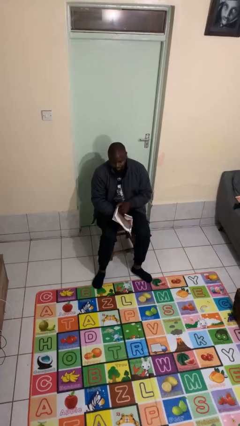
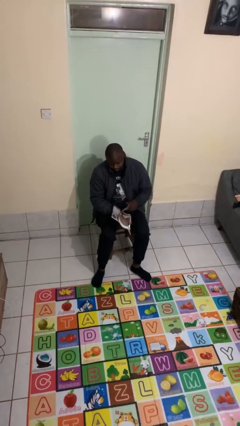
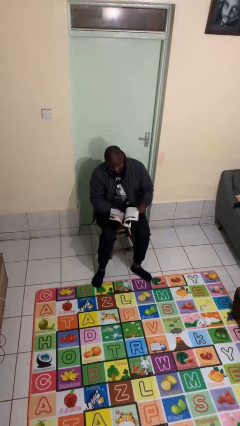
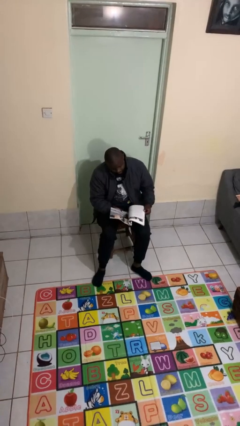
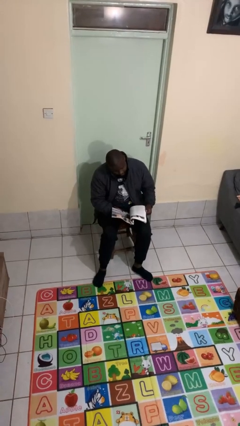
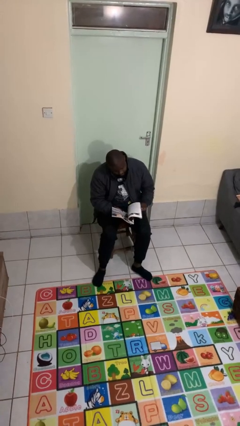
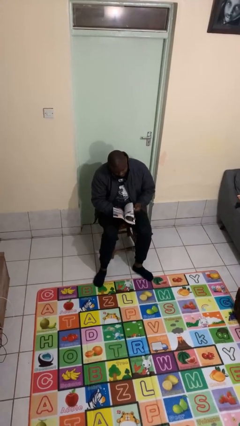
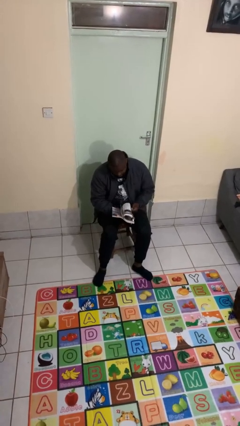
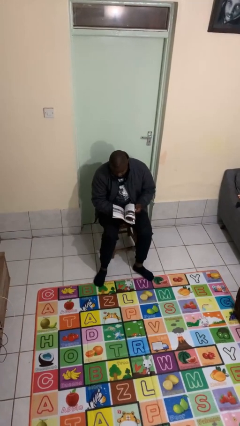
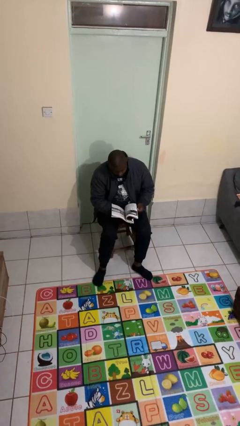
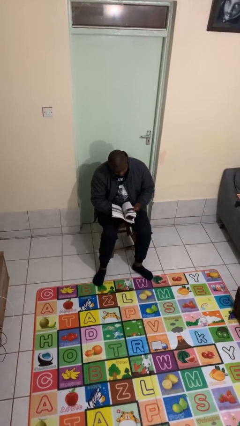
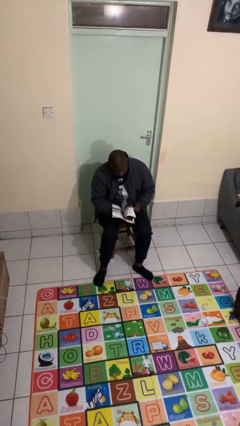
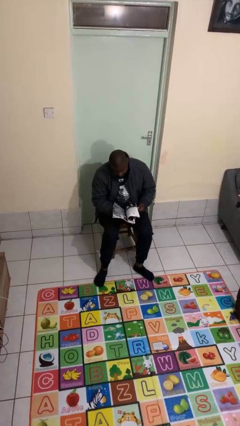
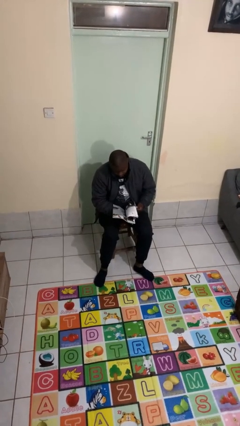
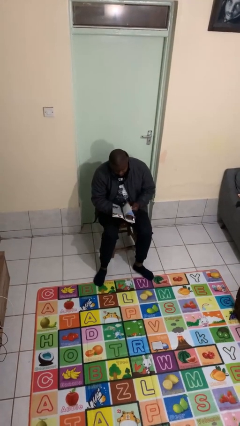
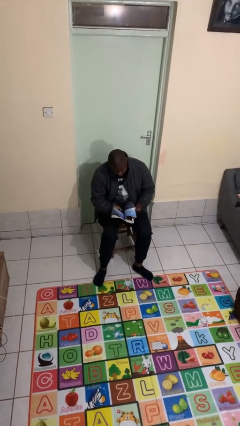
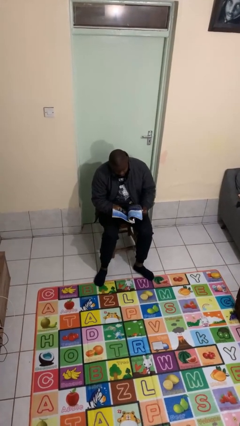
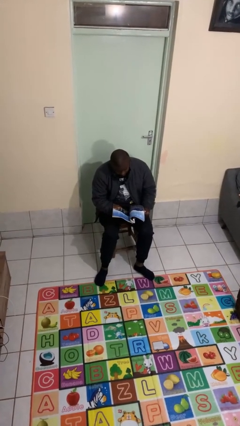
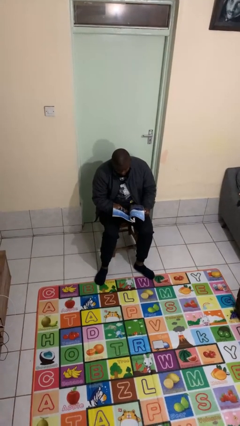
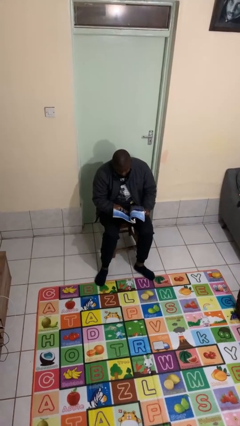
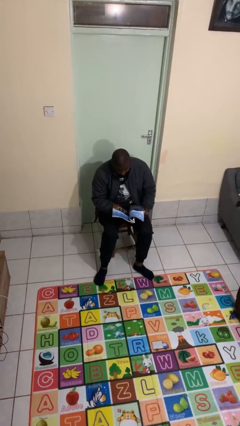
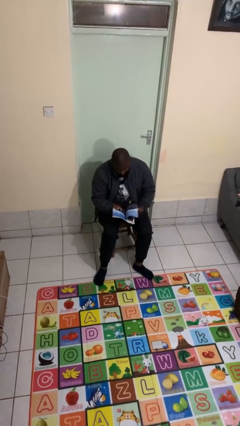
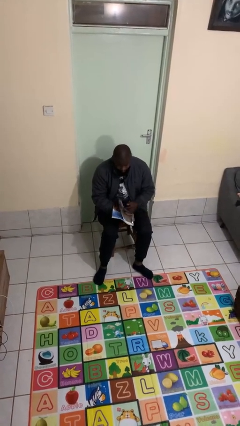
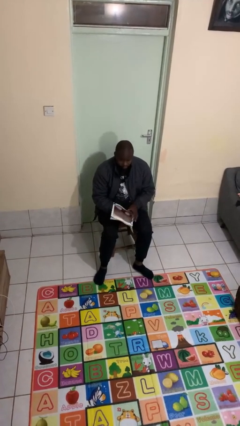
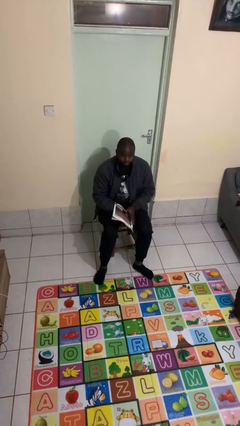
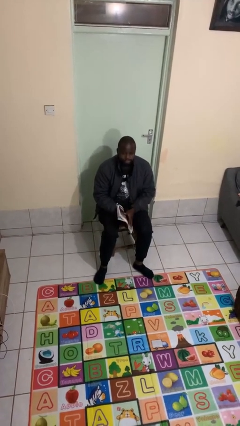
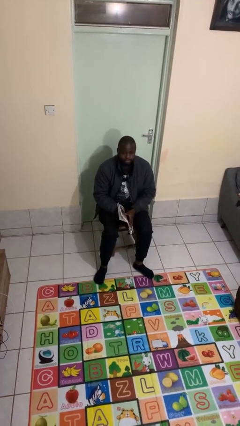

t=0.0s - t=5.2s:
person reads magazine

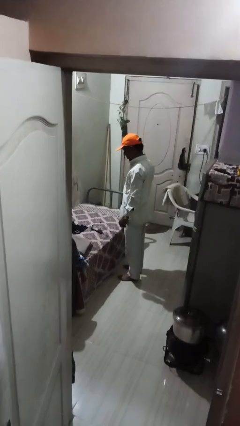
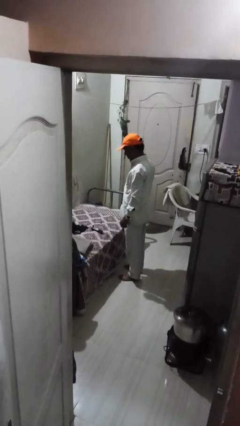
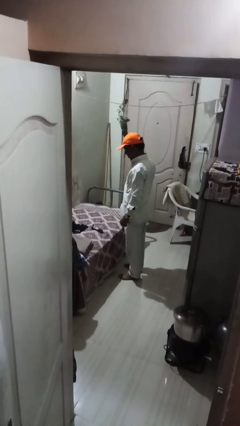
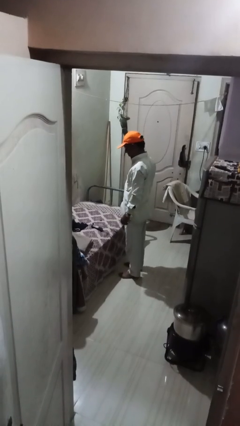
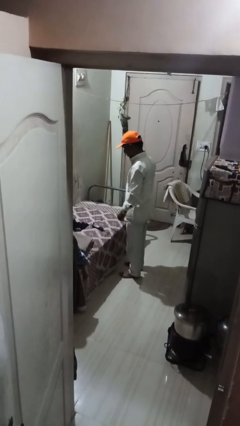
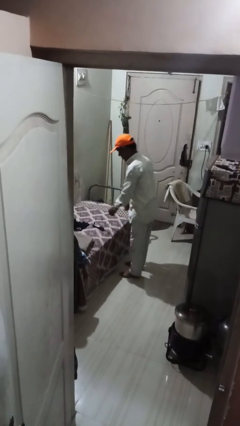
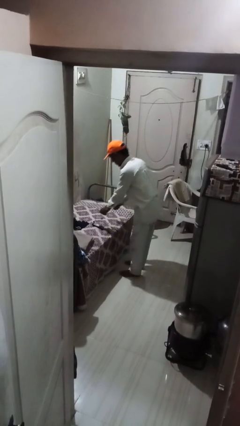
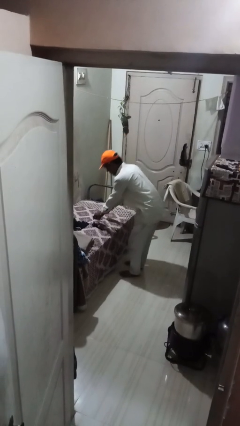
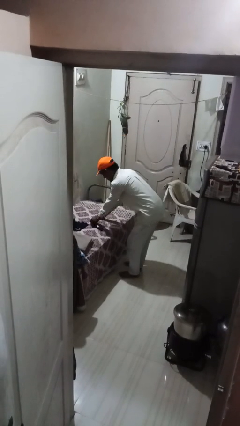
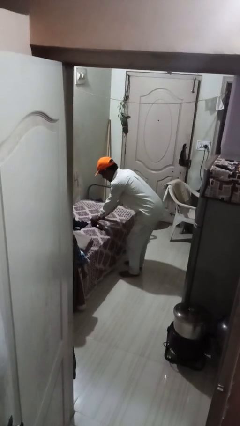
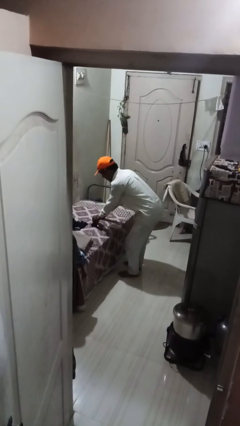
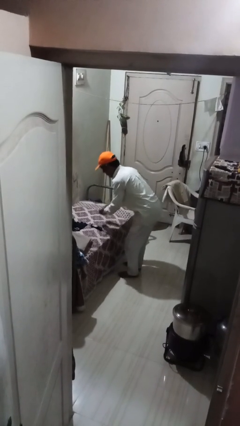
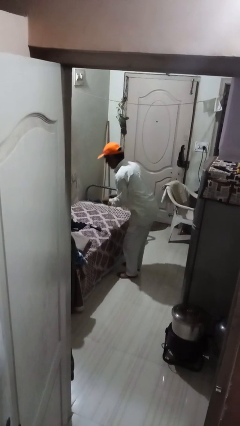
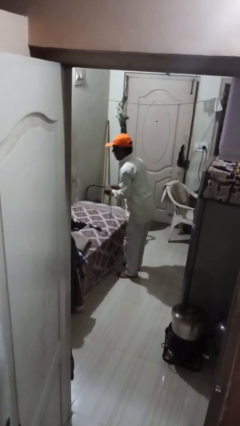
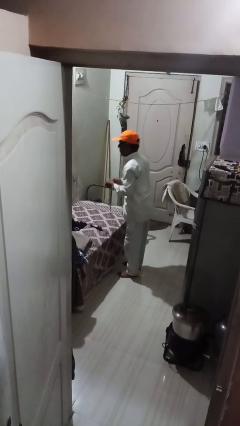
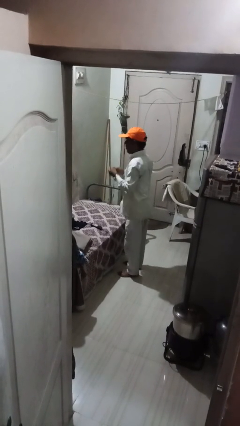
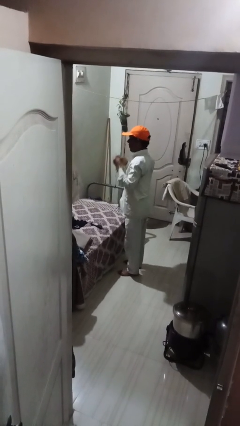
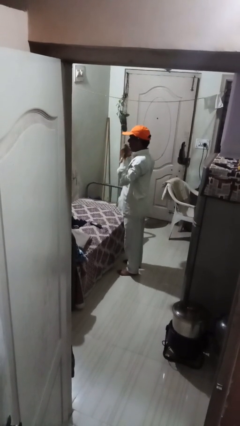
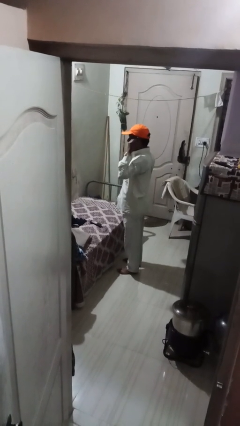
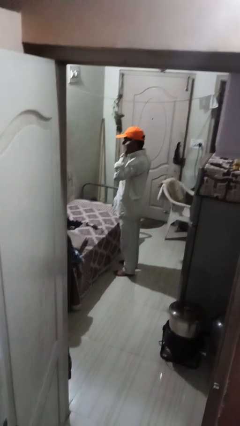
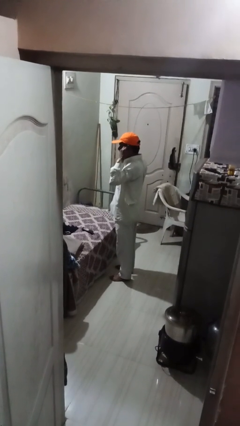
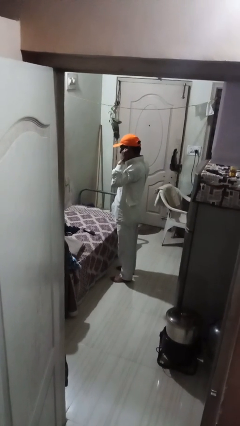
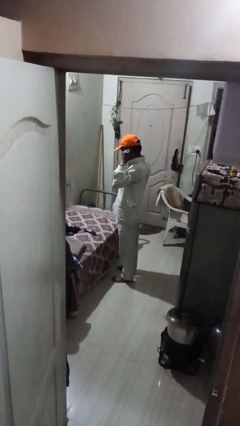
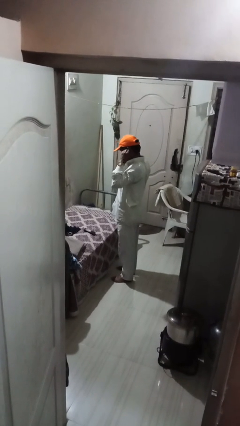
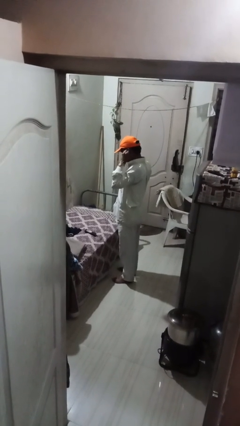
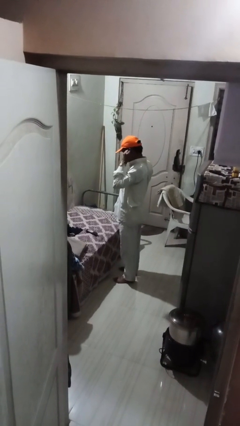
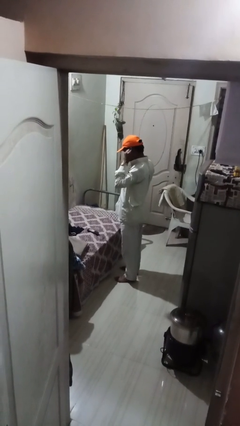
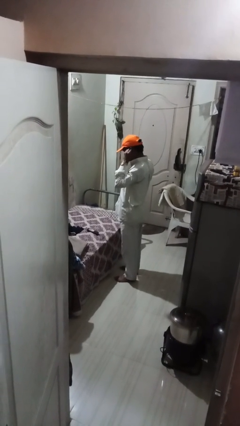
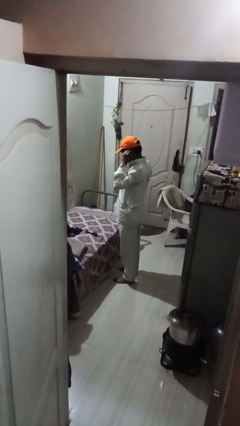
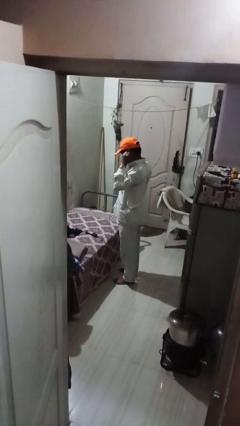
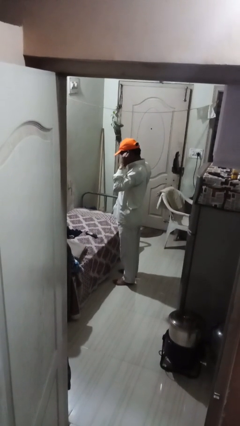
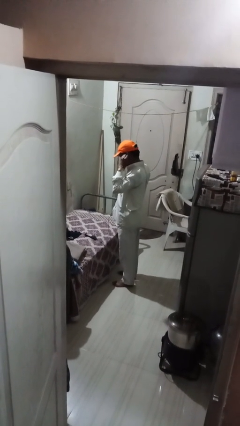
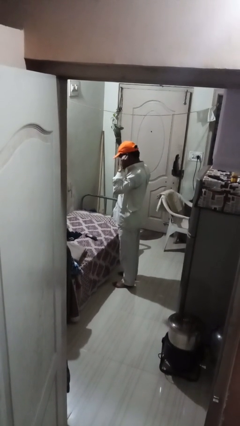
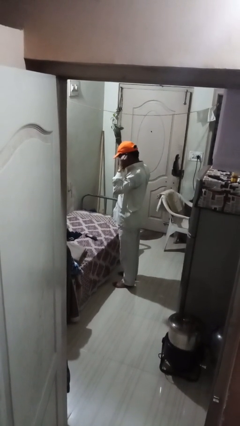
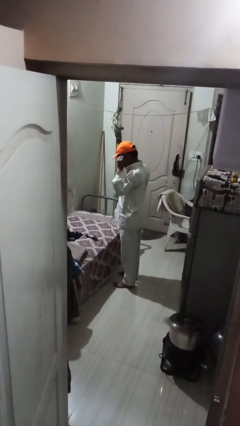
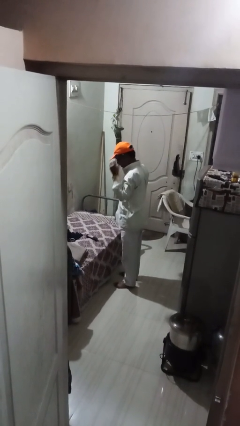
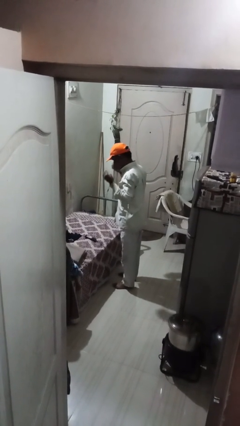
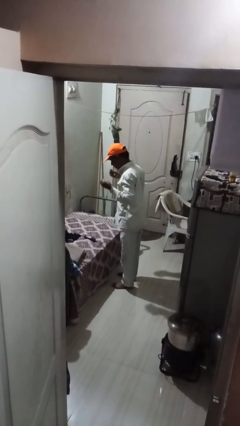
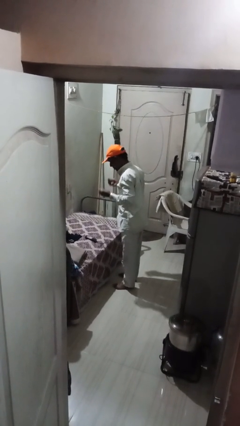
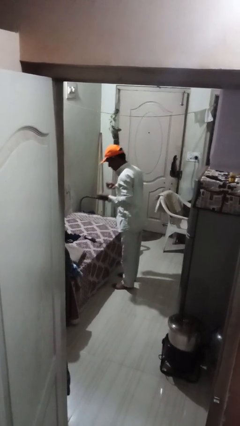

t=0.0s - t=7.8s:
person puts on headphones
